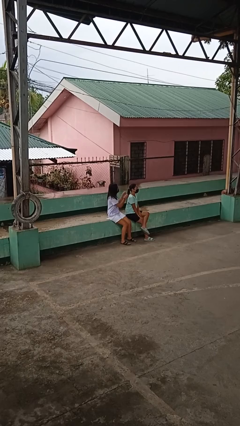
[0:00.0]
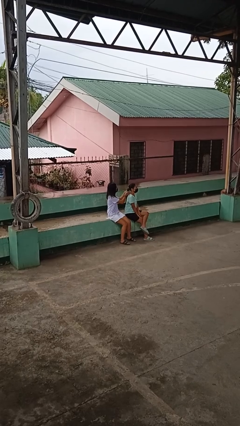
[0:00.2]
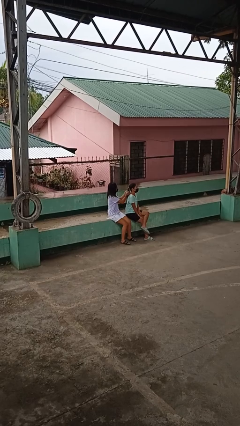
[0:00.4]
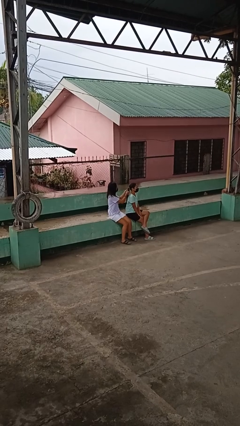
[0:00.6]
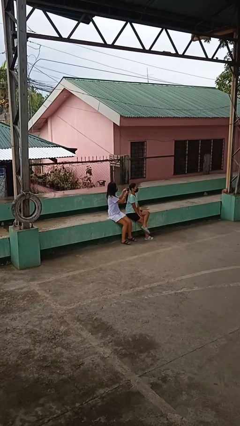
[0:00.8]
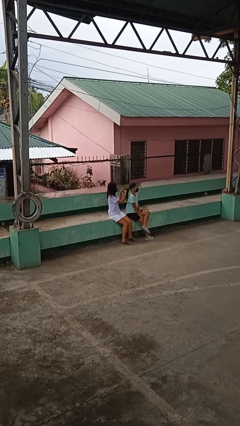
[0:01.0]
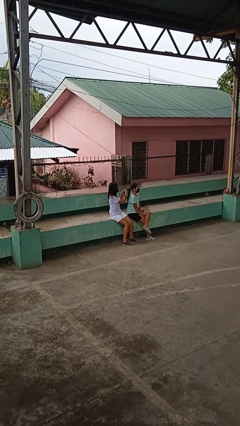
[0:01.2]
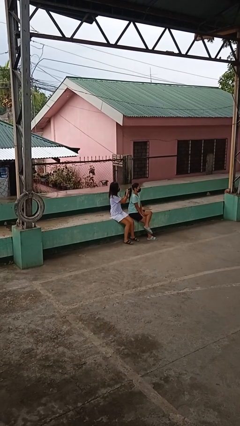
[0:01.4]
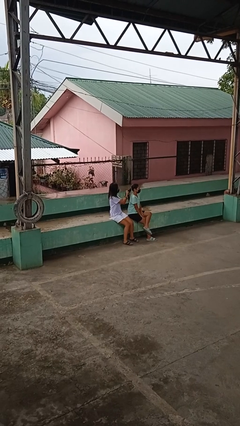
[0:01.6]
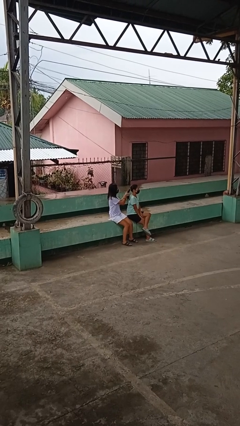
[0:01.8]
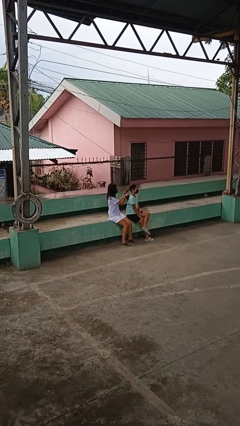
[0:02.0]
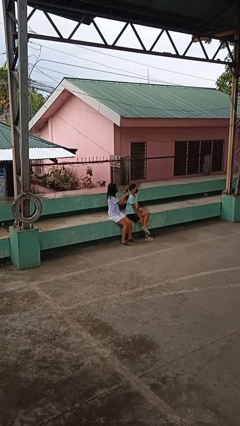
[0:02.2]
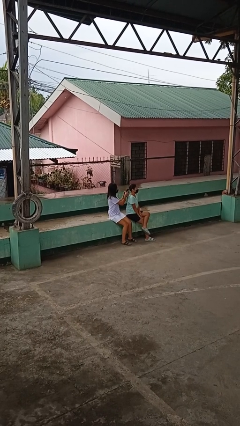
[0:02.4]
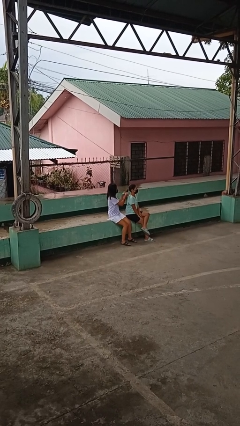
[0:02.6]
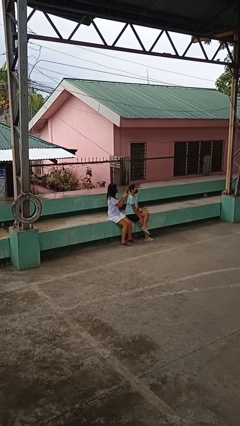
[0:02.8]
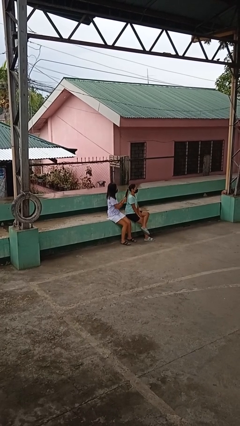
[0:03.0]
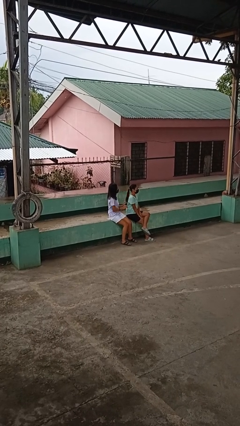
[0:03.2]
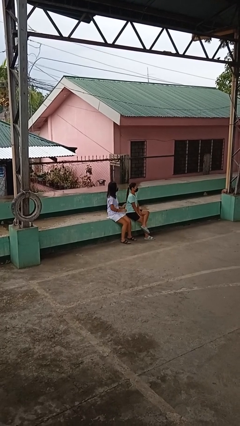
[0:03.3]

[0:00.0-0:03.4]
person braids hair of person

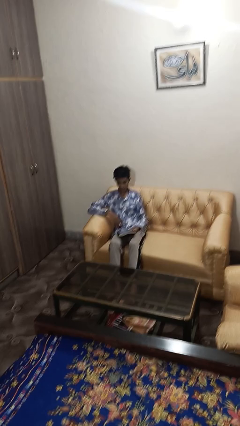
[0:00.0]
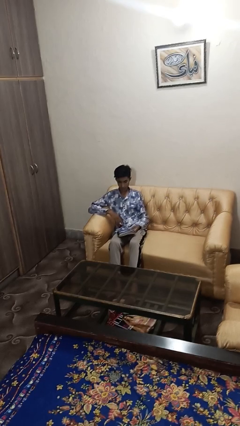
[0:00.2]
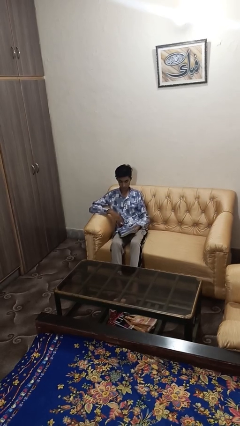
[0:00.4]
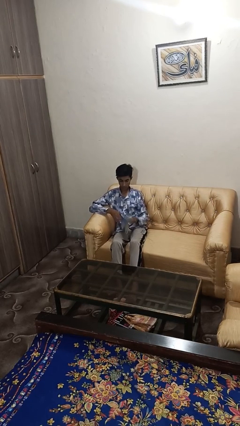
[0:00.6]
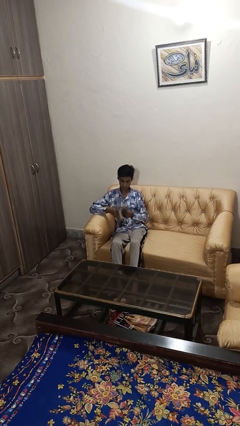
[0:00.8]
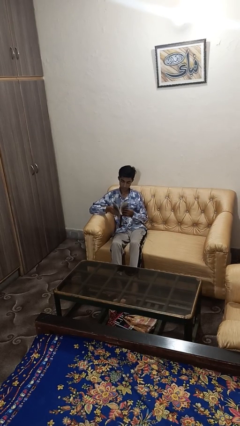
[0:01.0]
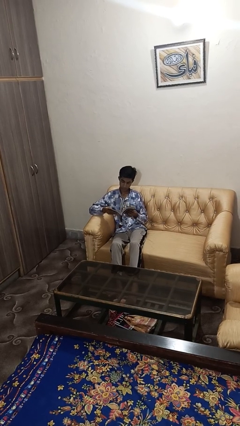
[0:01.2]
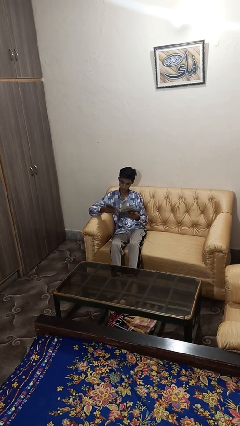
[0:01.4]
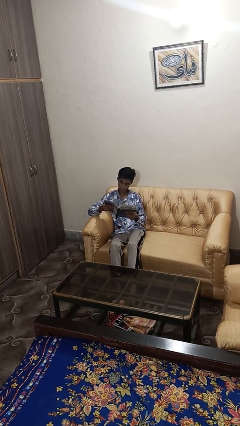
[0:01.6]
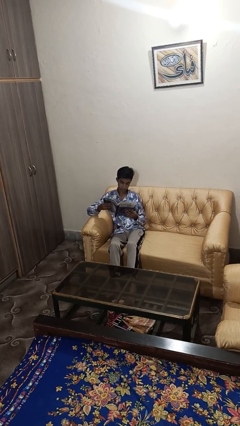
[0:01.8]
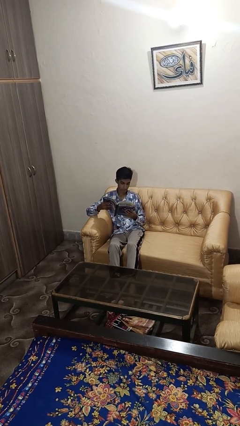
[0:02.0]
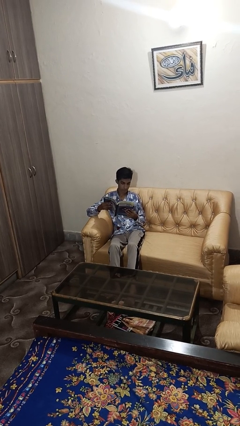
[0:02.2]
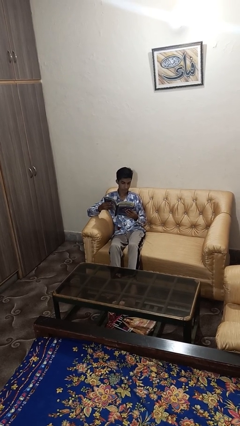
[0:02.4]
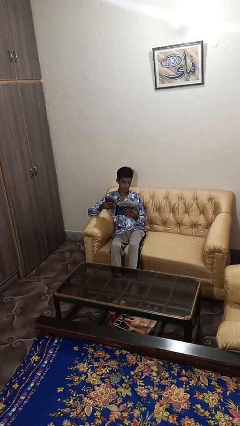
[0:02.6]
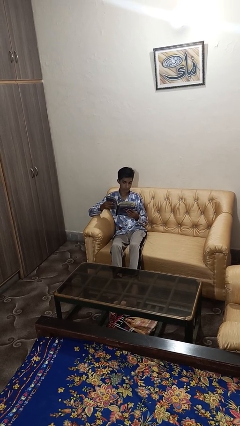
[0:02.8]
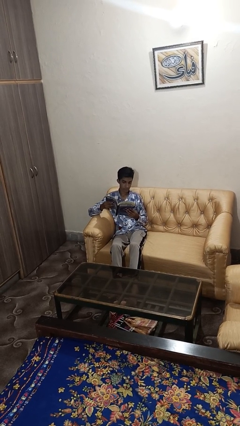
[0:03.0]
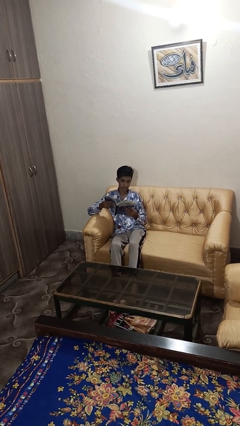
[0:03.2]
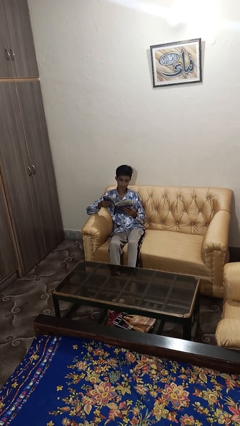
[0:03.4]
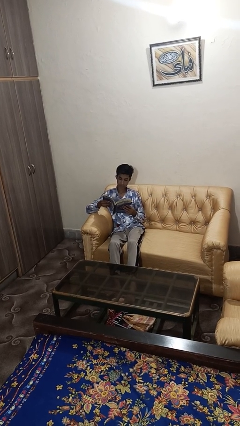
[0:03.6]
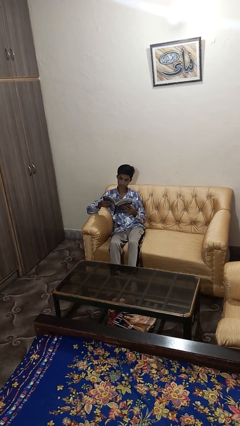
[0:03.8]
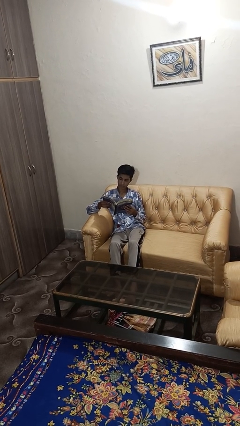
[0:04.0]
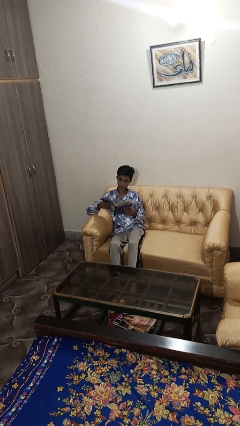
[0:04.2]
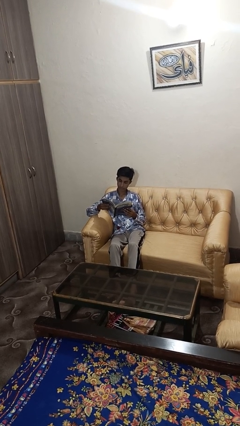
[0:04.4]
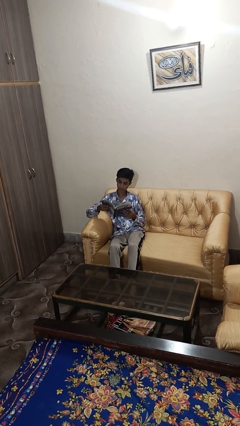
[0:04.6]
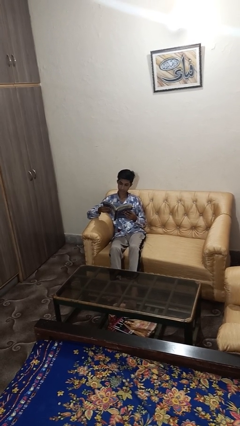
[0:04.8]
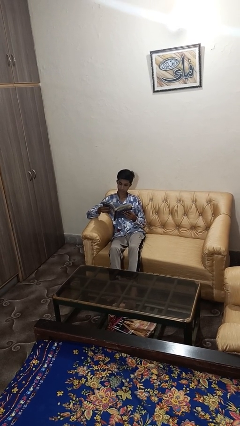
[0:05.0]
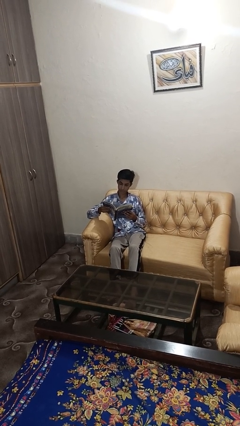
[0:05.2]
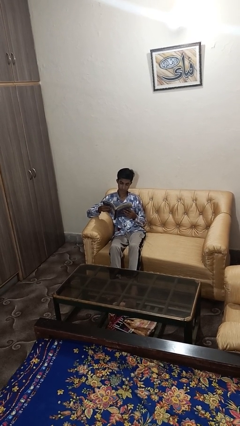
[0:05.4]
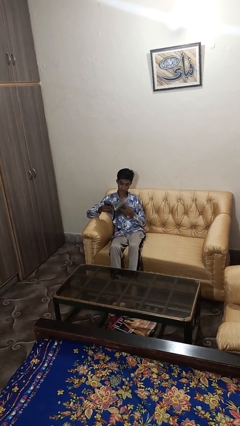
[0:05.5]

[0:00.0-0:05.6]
person reads book

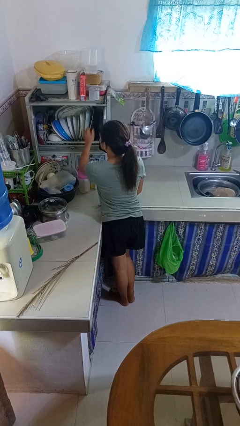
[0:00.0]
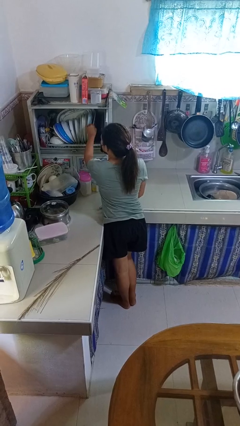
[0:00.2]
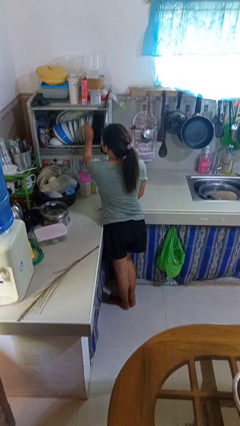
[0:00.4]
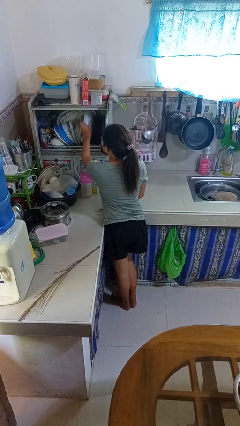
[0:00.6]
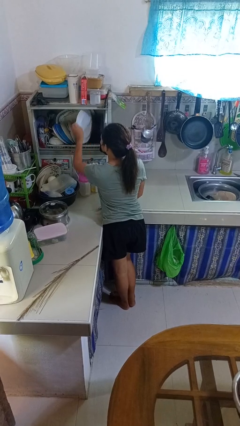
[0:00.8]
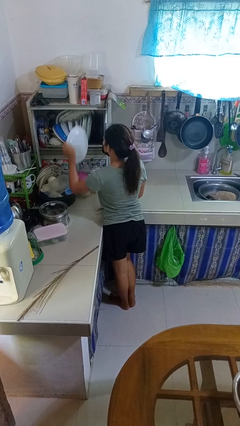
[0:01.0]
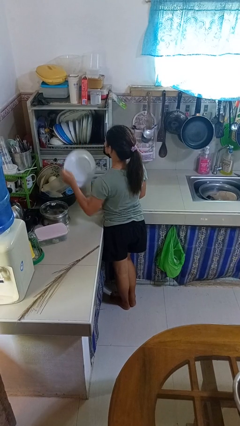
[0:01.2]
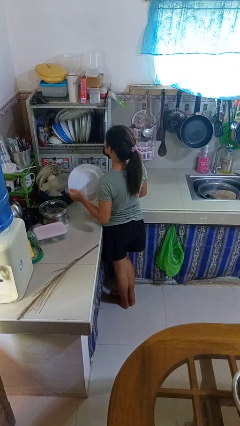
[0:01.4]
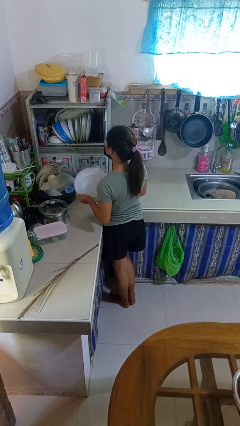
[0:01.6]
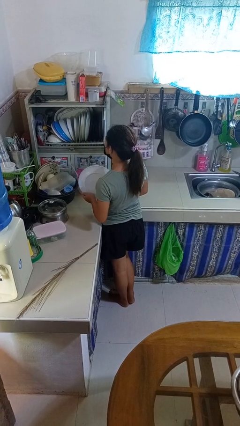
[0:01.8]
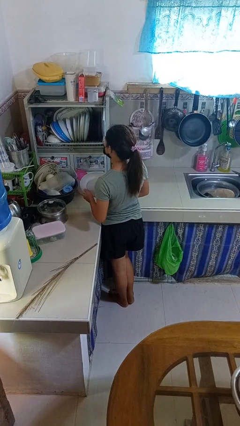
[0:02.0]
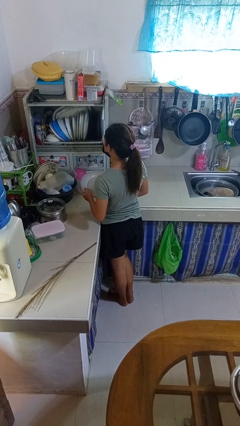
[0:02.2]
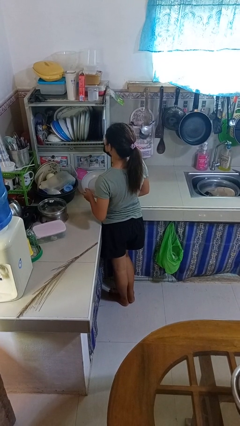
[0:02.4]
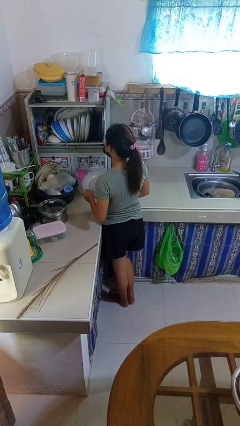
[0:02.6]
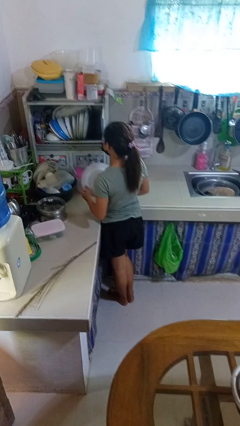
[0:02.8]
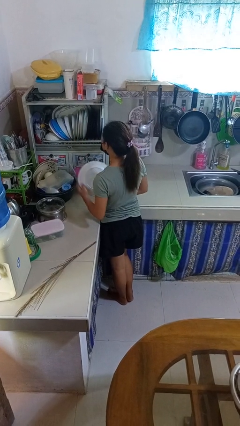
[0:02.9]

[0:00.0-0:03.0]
person takes object from kitchen drawer

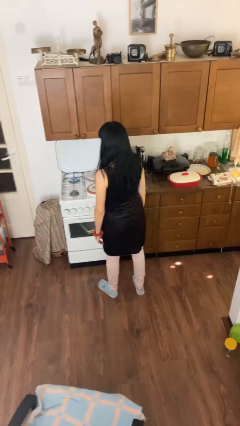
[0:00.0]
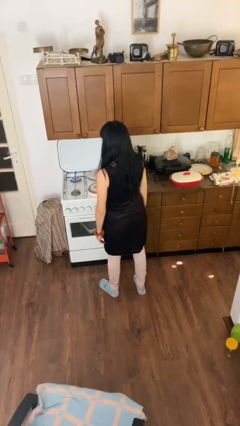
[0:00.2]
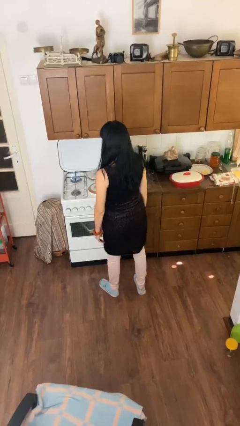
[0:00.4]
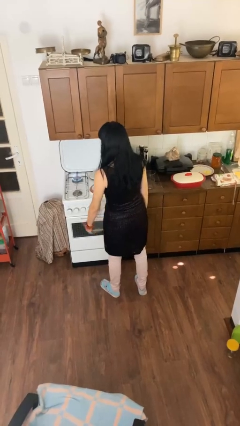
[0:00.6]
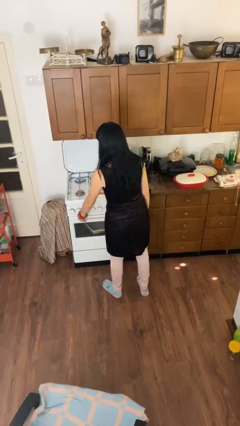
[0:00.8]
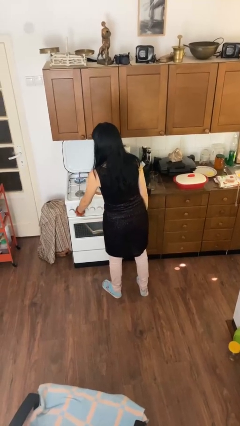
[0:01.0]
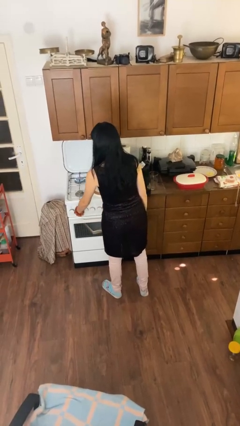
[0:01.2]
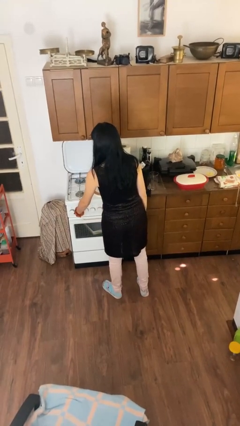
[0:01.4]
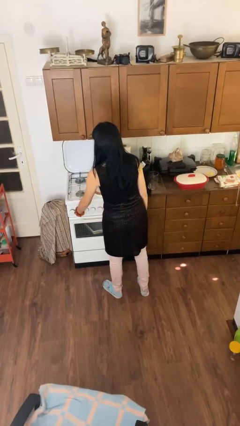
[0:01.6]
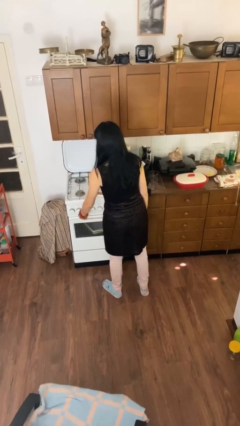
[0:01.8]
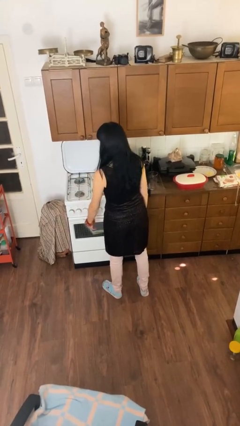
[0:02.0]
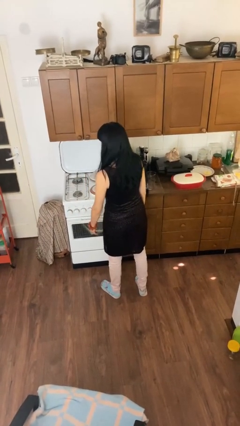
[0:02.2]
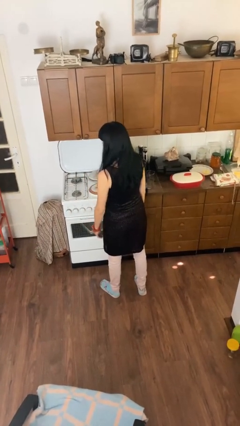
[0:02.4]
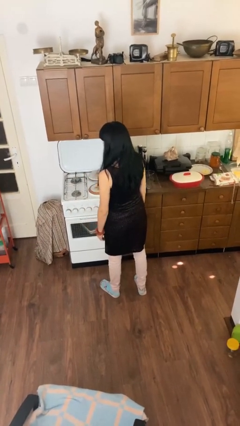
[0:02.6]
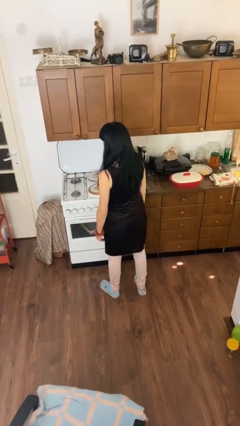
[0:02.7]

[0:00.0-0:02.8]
person turns off stovetop

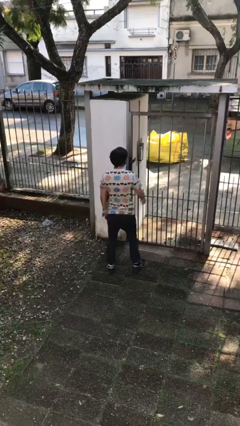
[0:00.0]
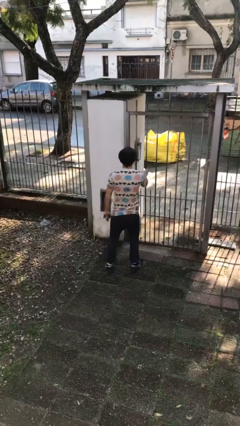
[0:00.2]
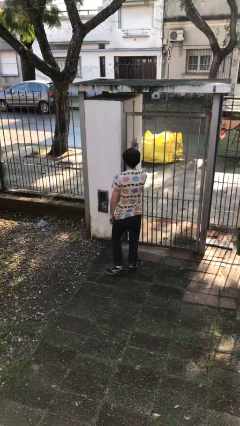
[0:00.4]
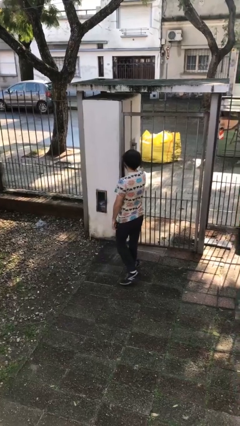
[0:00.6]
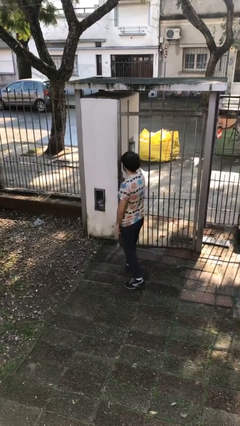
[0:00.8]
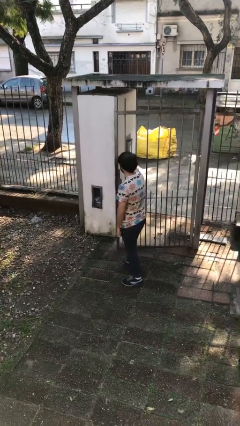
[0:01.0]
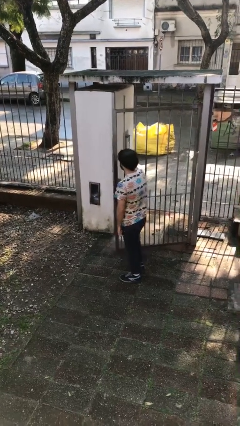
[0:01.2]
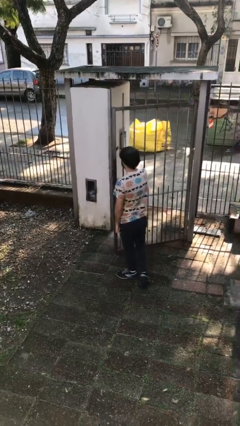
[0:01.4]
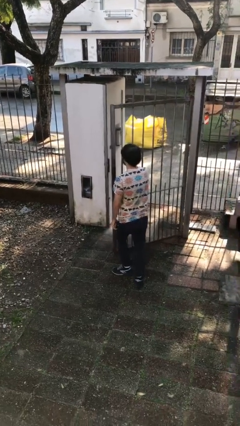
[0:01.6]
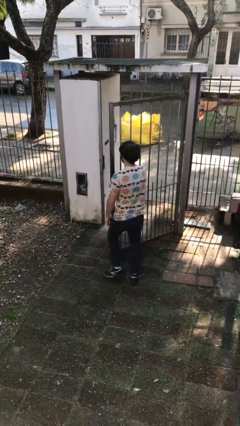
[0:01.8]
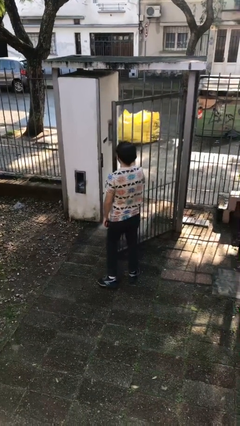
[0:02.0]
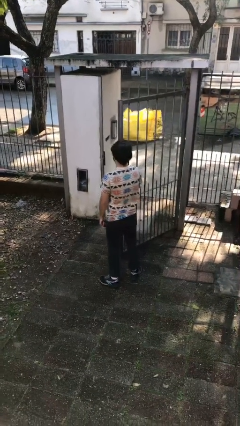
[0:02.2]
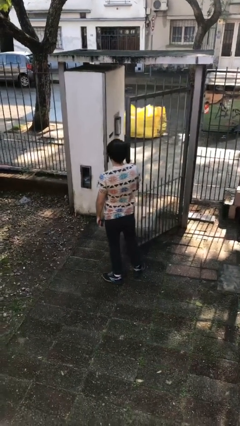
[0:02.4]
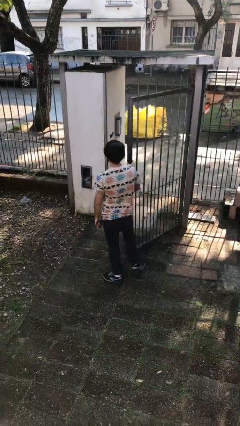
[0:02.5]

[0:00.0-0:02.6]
person opens gate

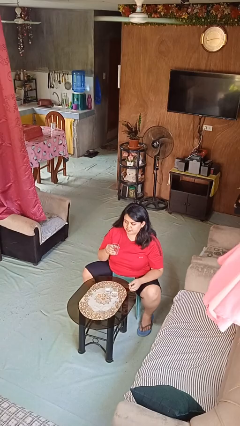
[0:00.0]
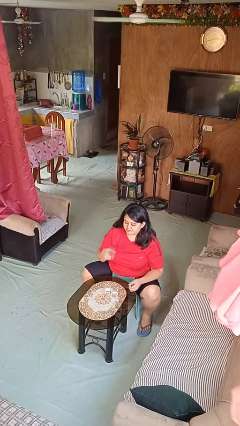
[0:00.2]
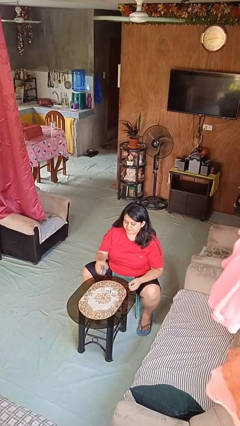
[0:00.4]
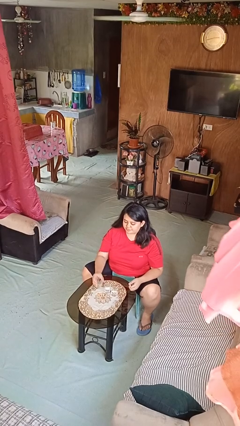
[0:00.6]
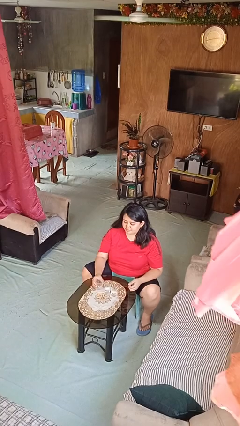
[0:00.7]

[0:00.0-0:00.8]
person puts down object on table
